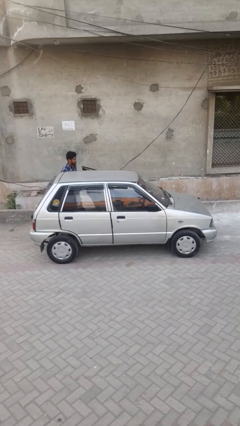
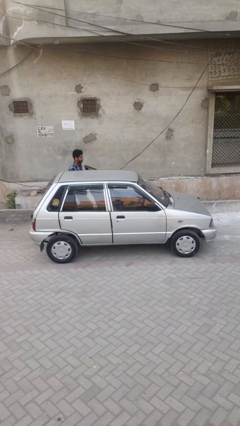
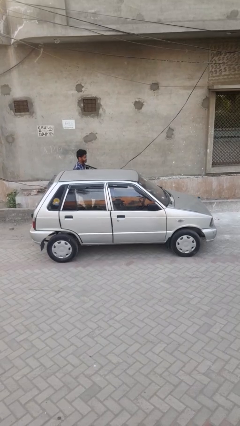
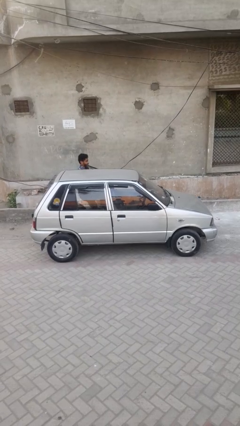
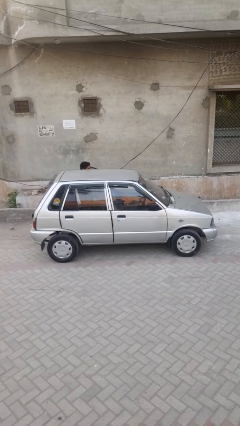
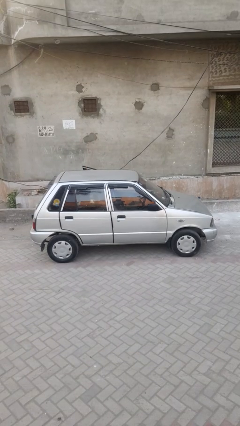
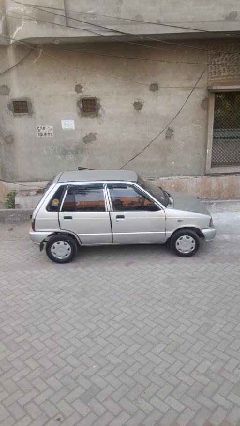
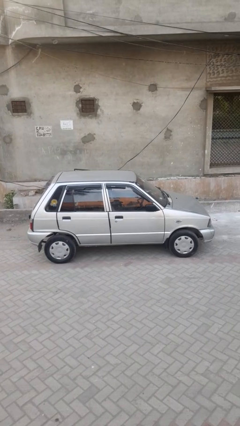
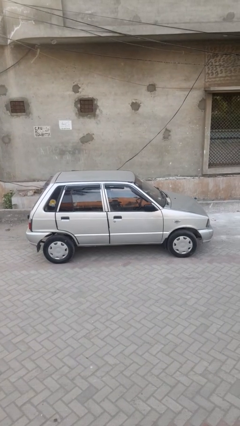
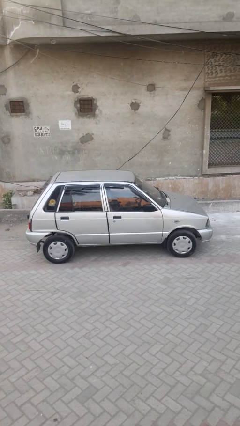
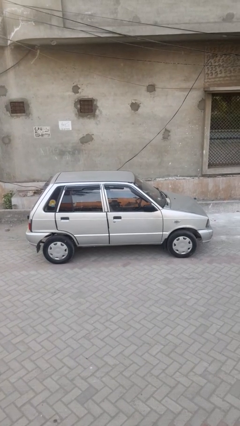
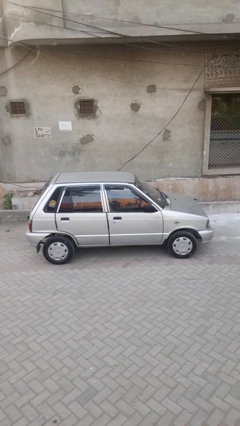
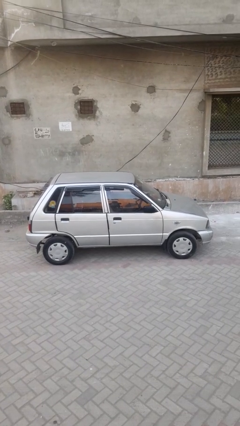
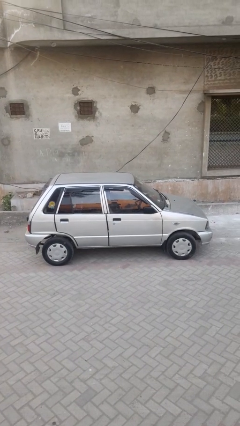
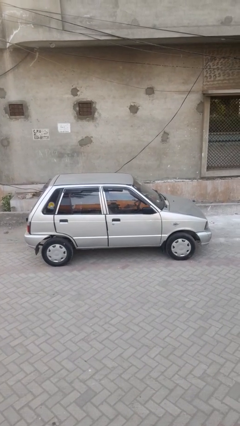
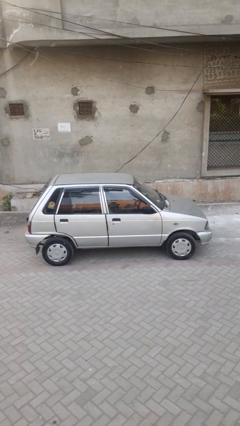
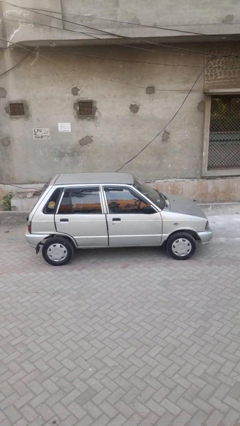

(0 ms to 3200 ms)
car picks up person

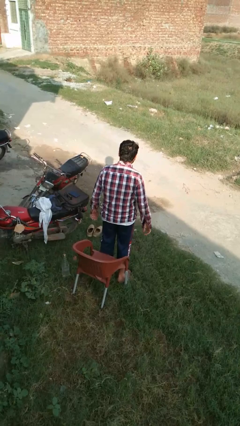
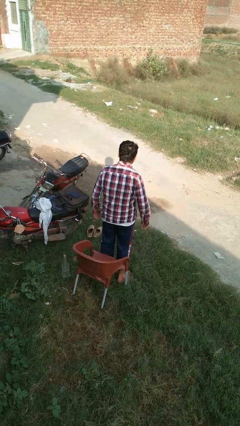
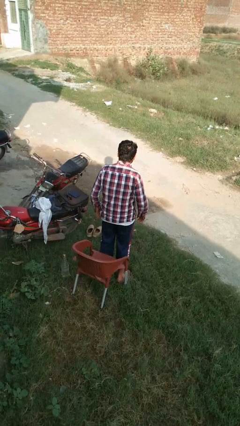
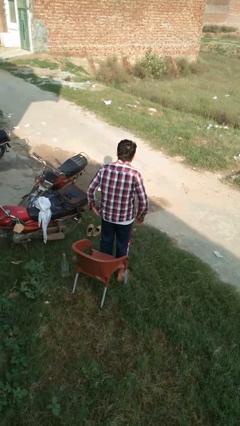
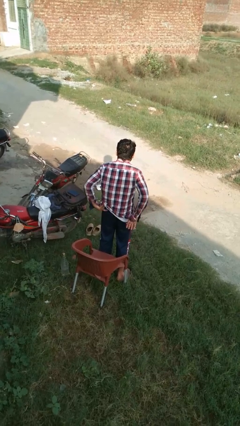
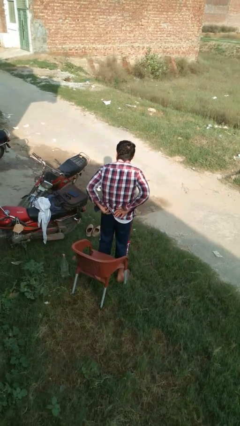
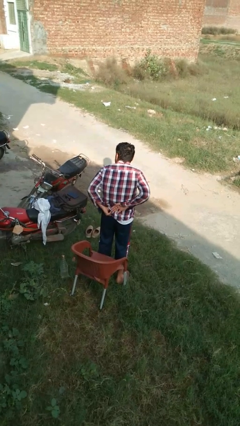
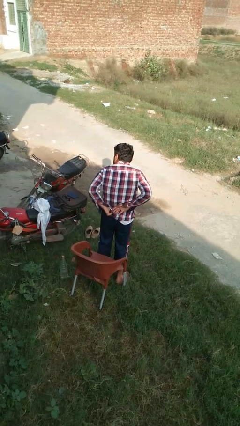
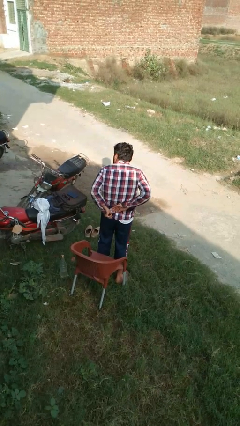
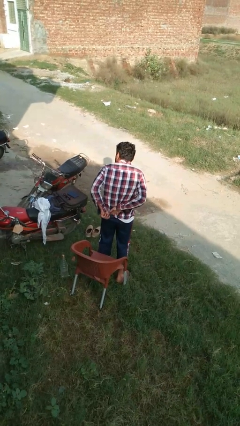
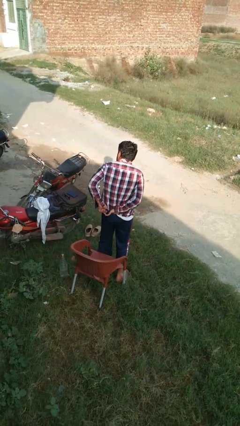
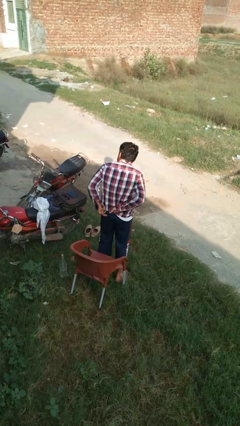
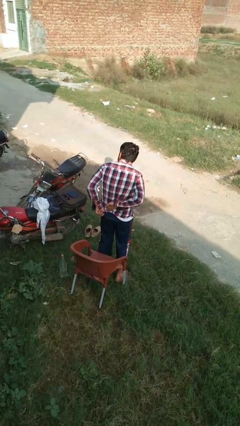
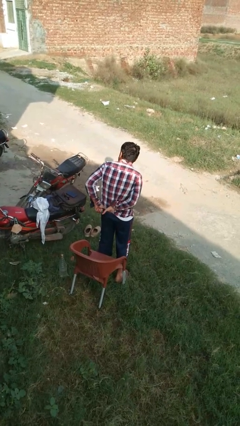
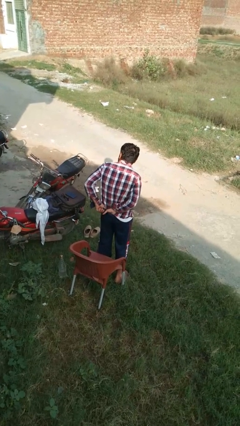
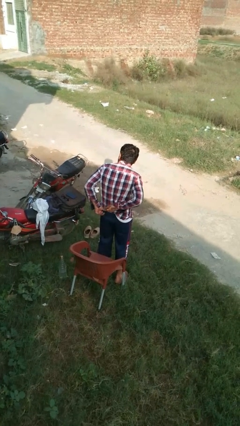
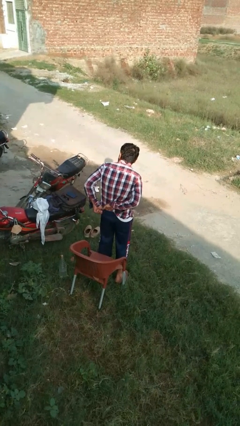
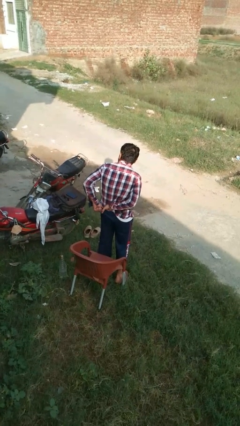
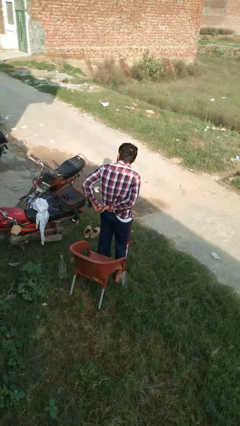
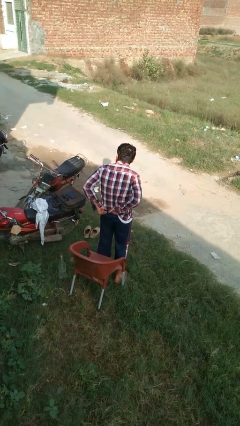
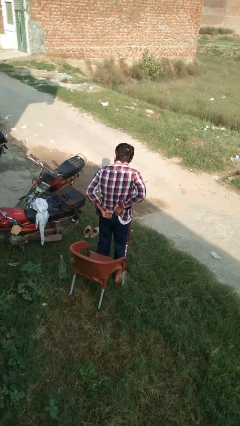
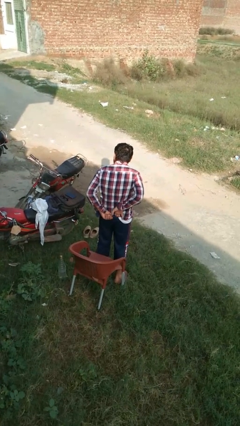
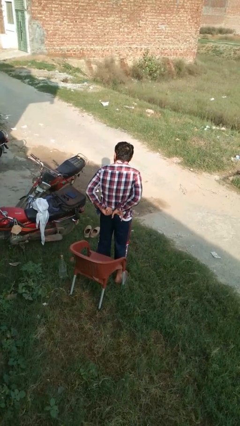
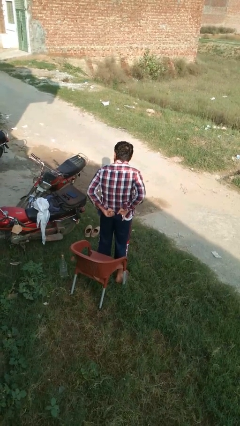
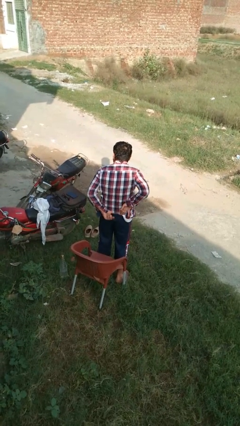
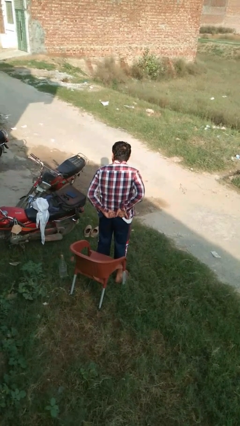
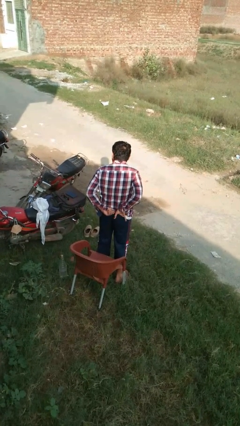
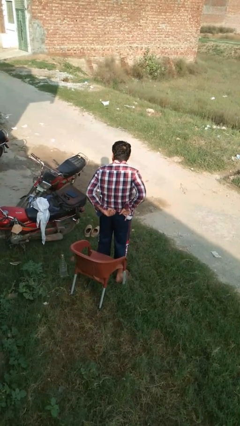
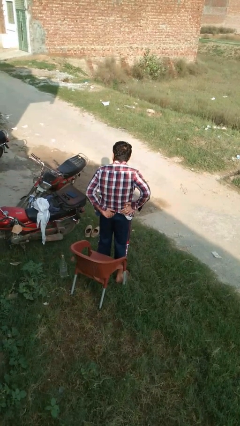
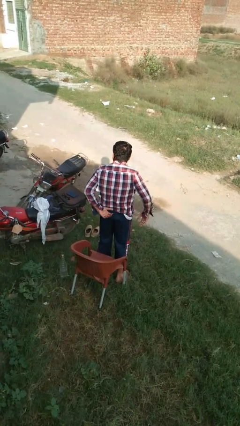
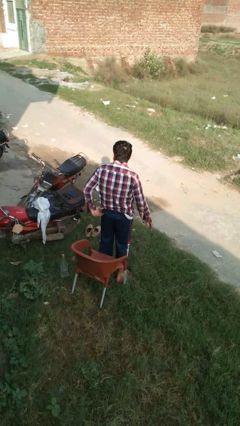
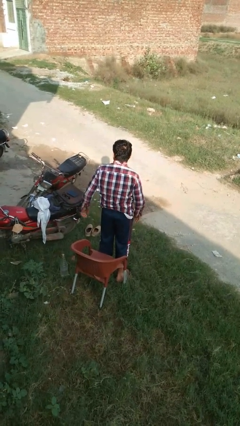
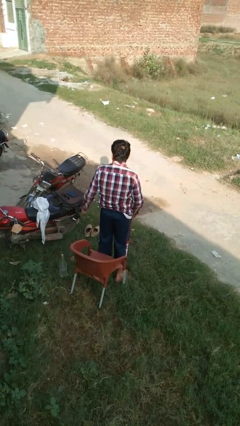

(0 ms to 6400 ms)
person tucks in shirt

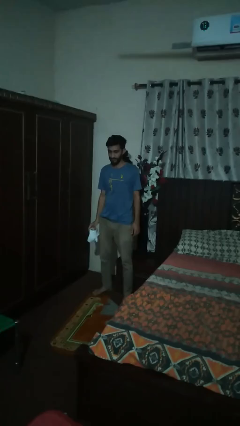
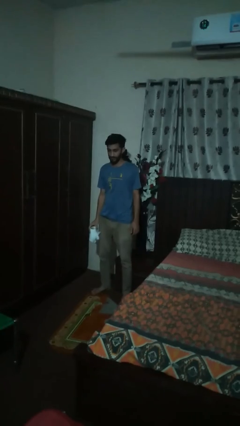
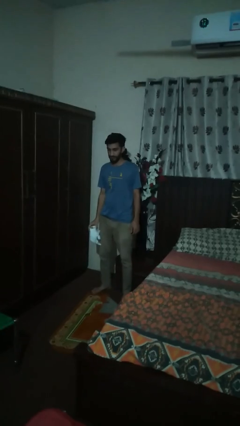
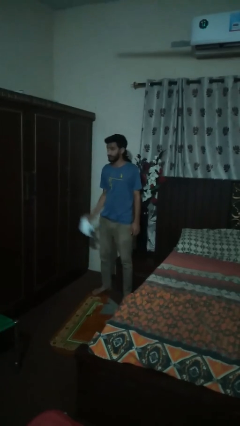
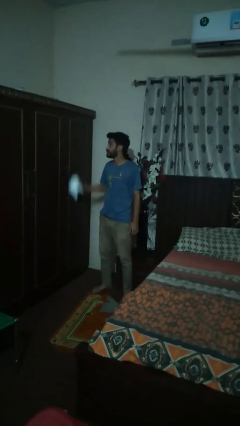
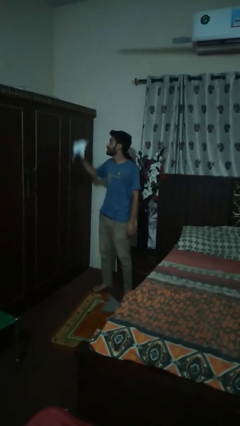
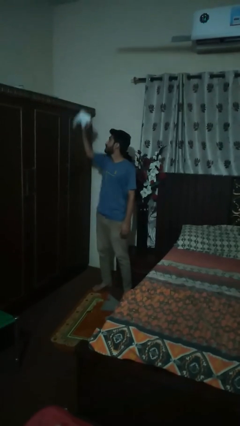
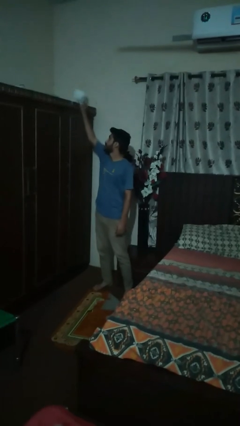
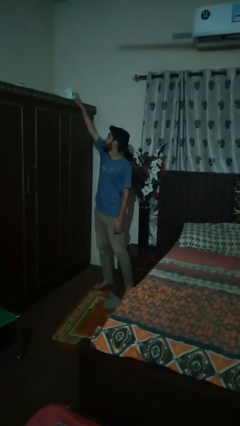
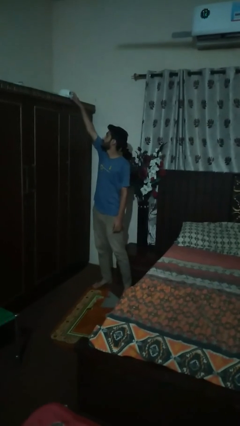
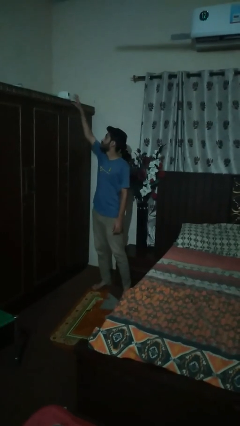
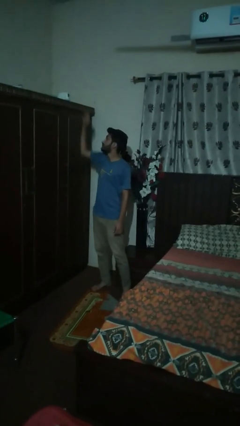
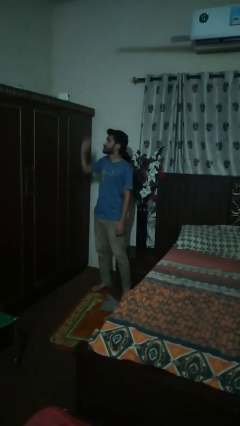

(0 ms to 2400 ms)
person picks up object from shelf

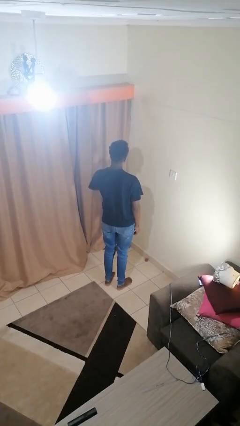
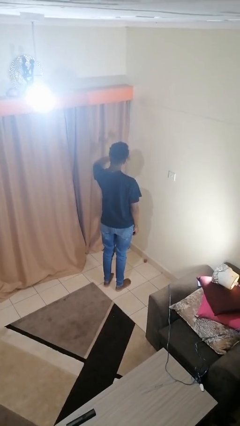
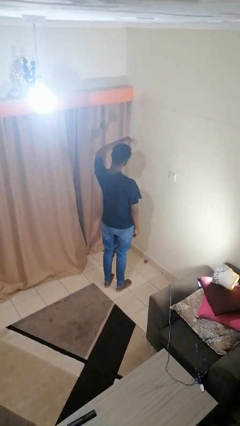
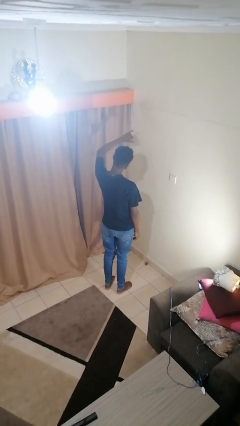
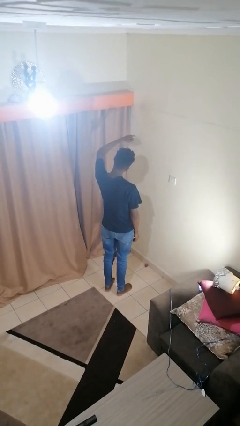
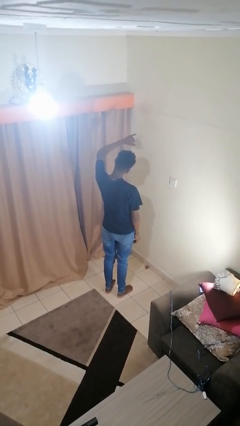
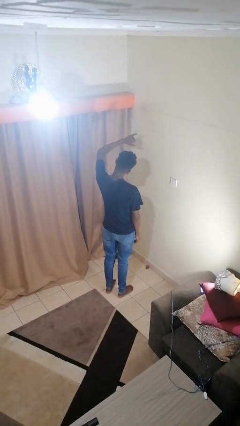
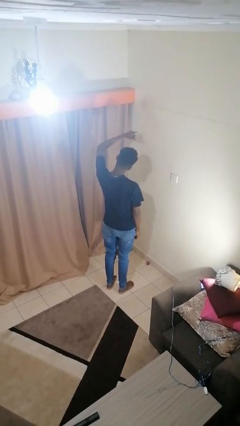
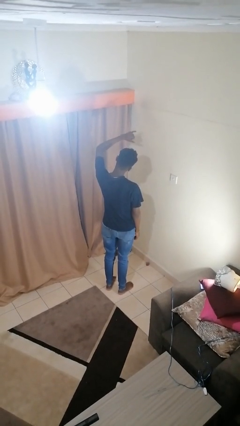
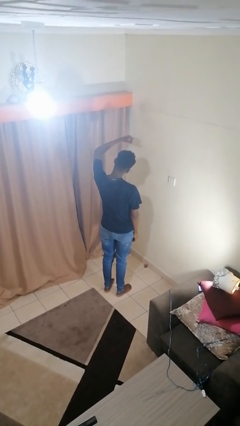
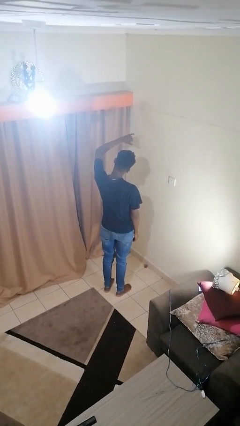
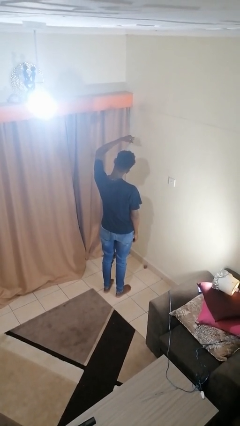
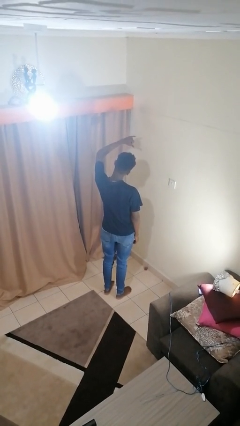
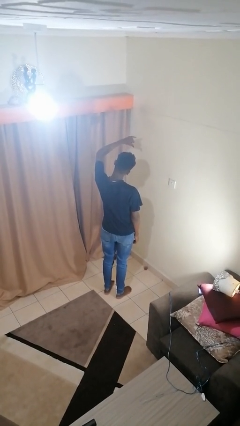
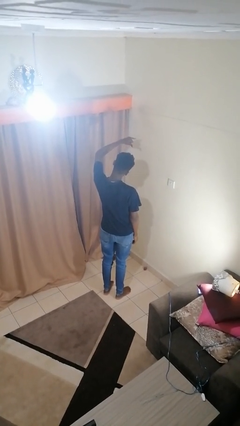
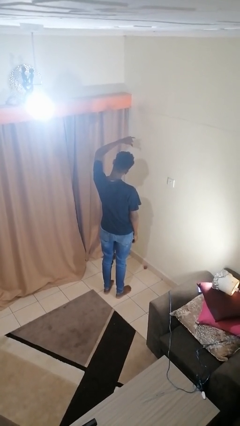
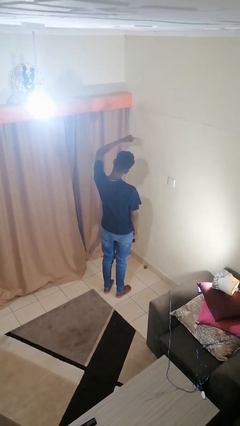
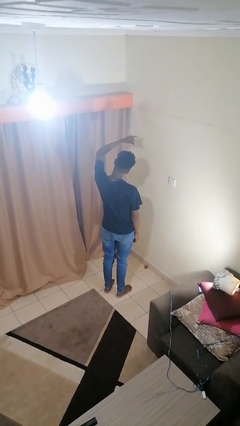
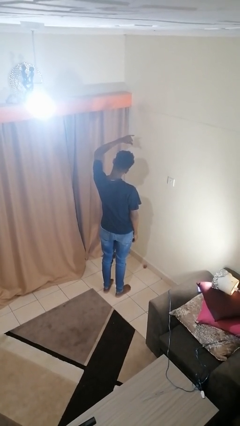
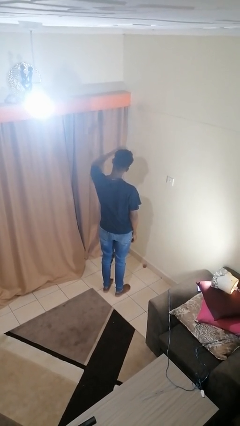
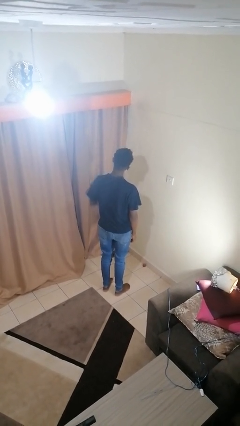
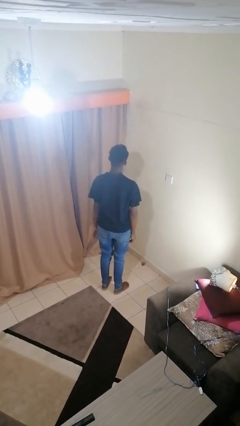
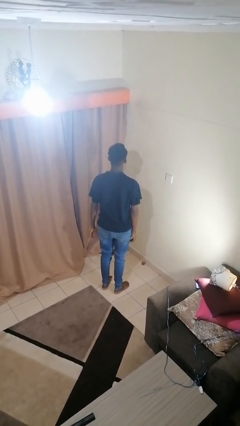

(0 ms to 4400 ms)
person gestures hang loose

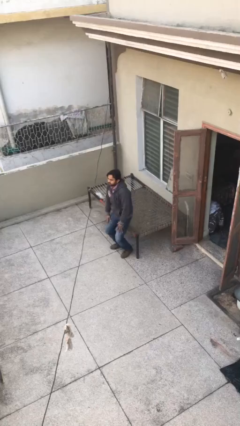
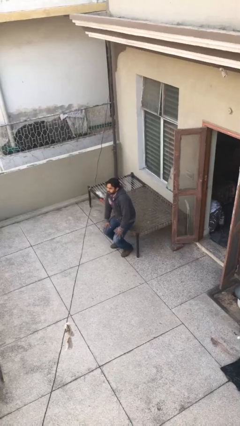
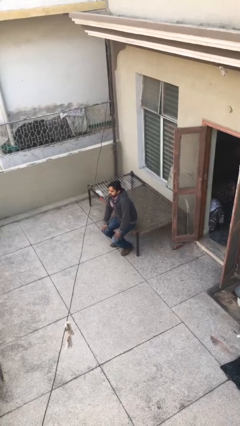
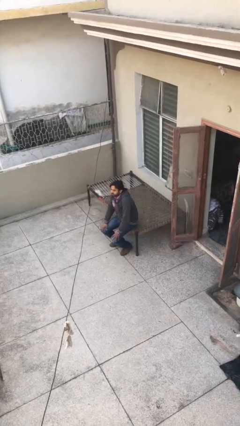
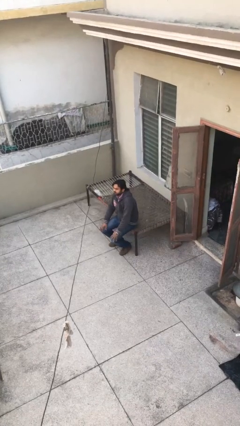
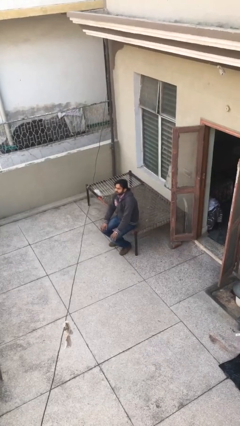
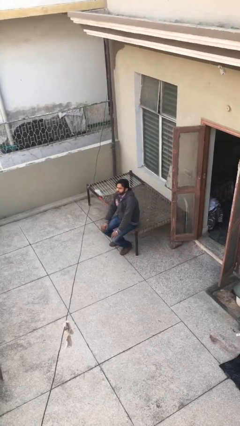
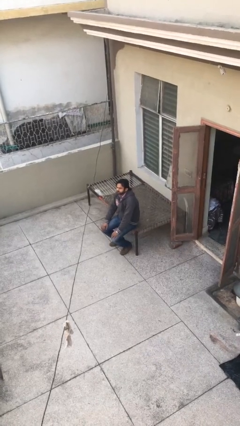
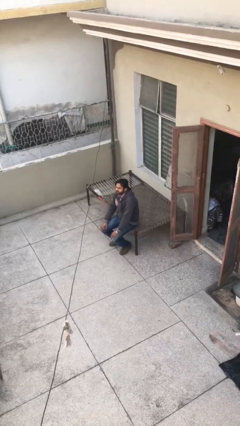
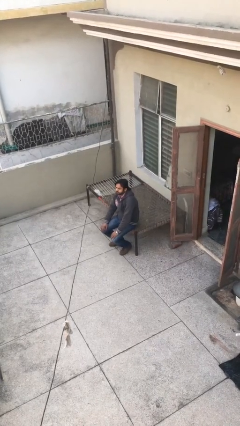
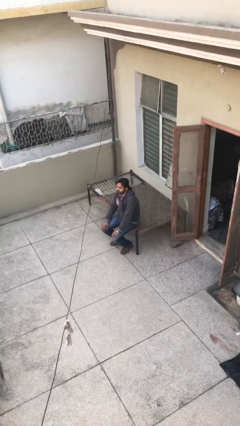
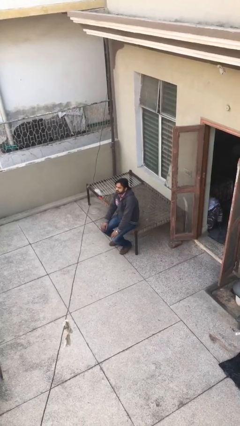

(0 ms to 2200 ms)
person sits down
